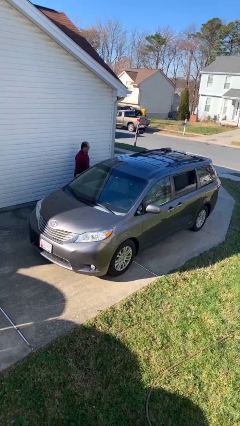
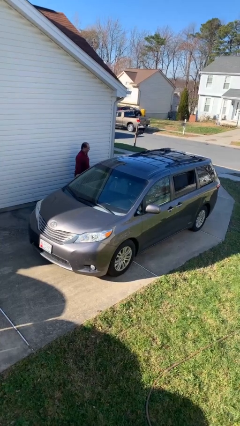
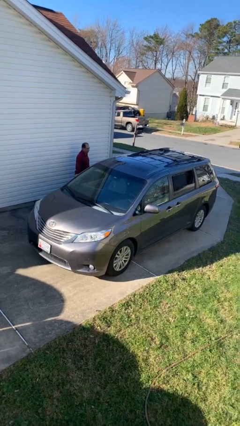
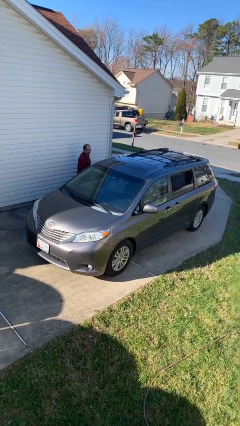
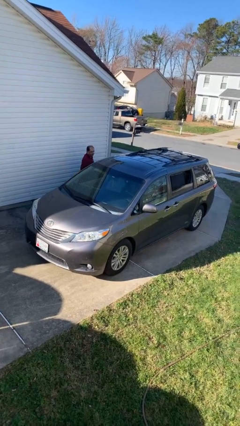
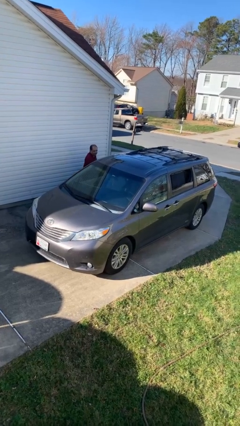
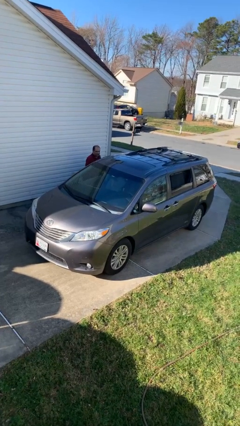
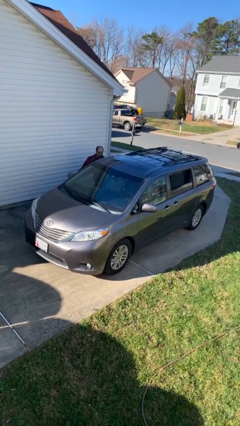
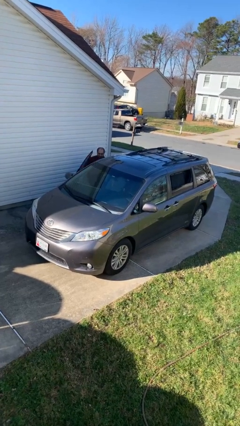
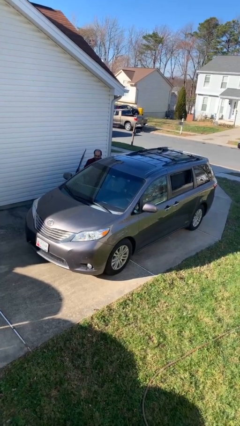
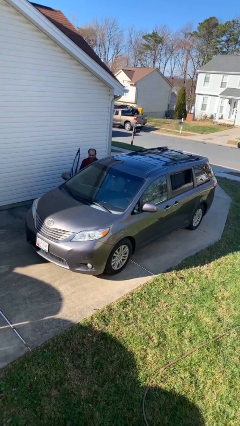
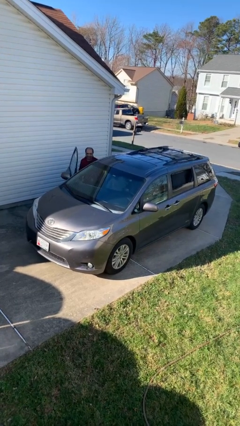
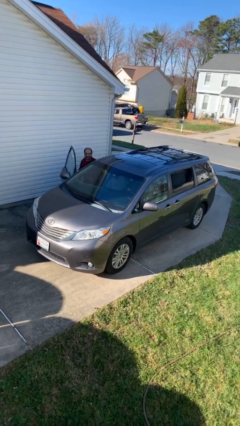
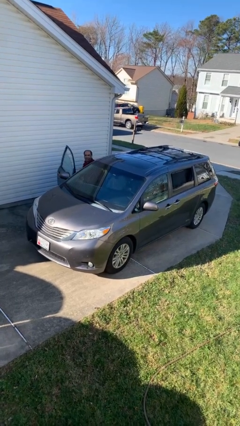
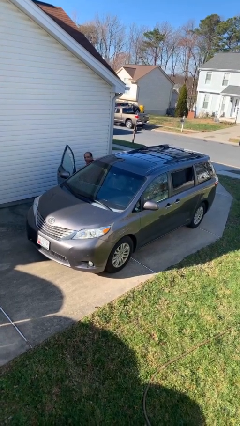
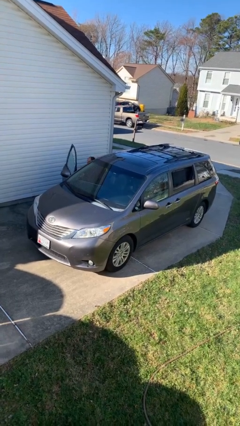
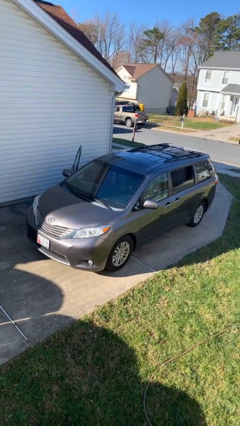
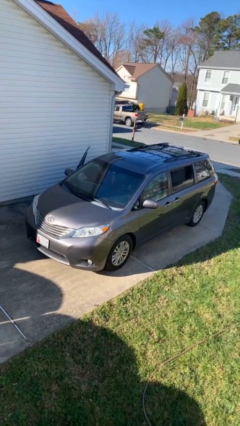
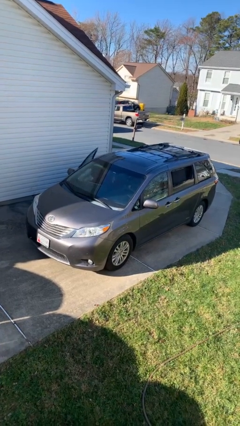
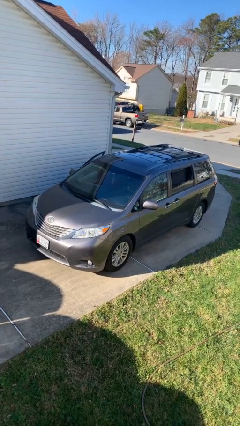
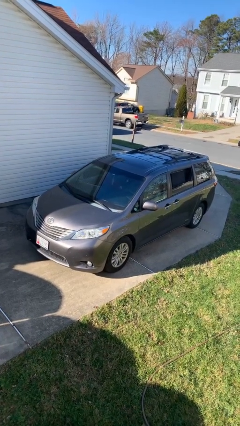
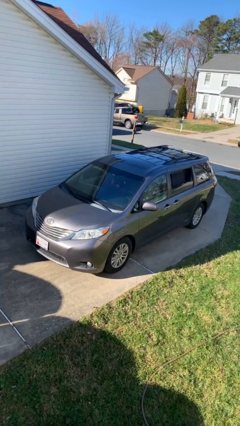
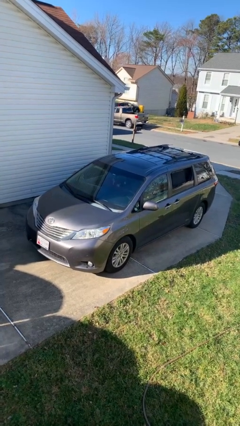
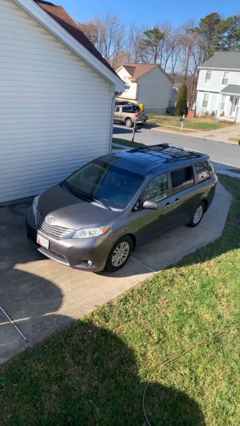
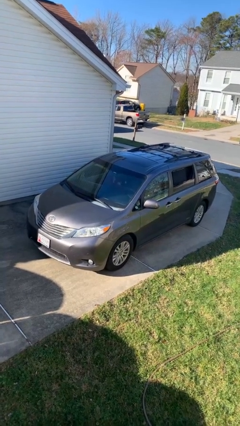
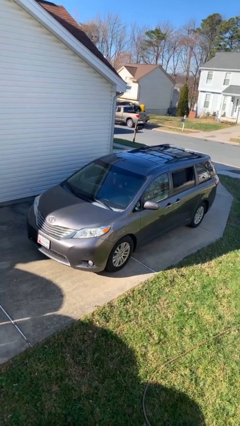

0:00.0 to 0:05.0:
car picks up person

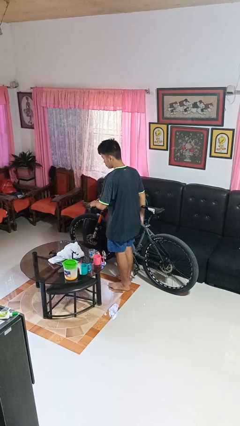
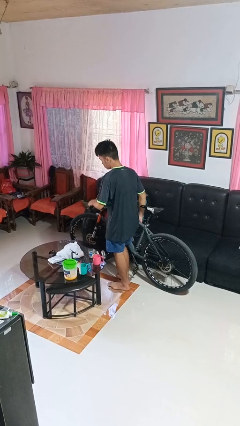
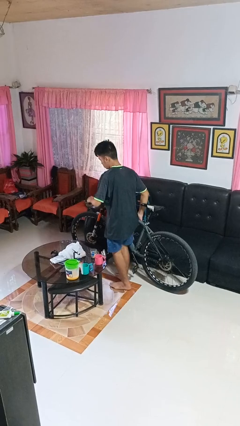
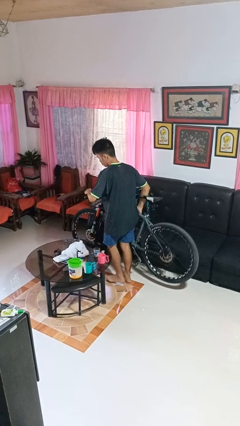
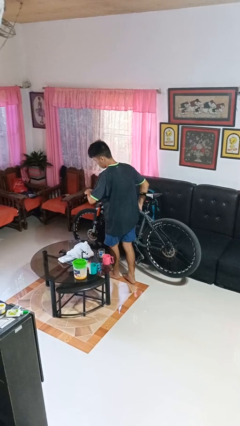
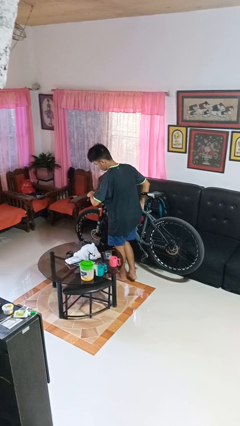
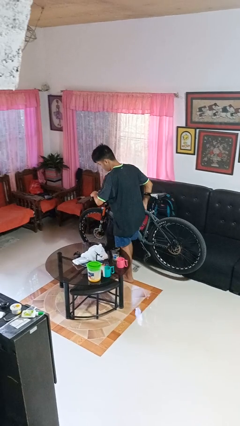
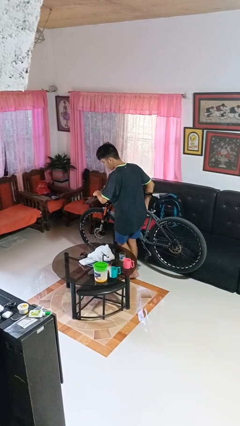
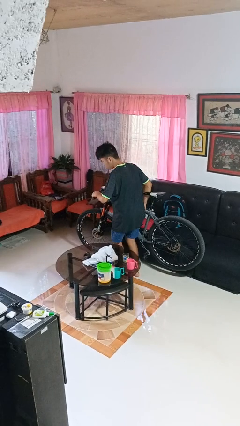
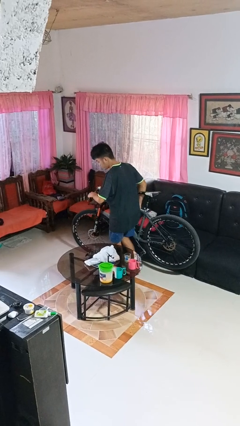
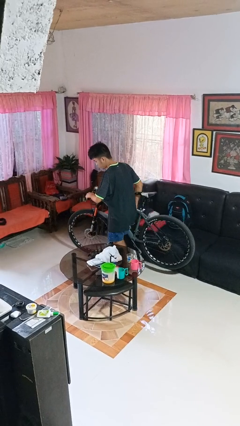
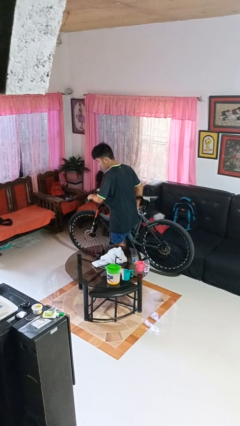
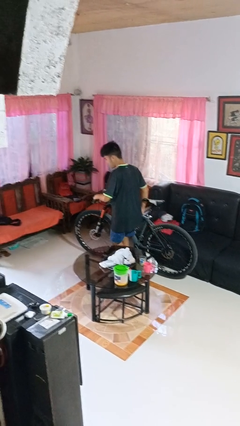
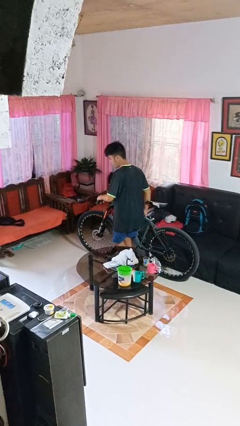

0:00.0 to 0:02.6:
person carries bicycle

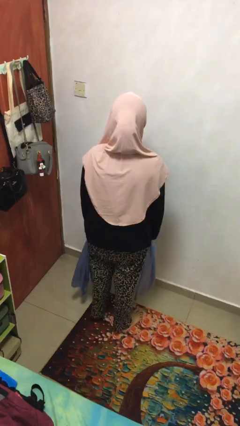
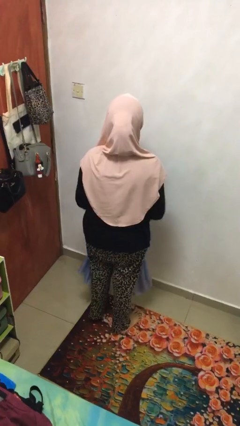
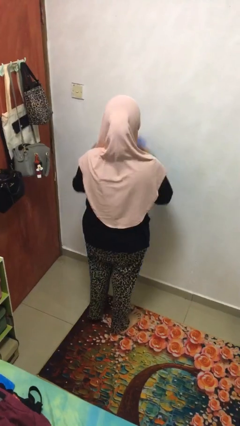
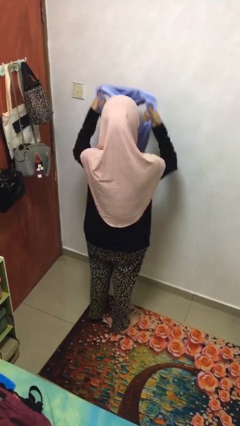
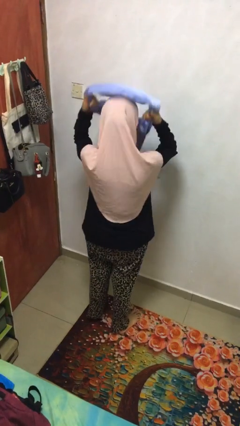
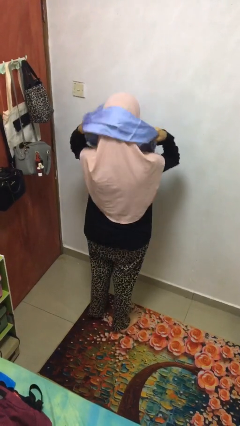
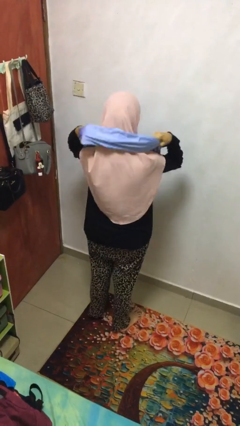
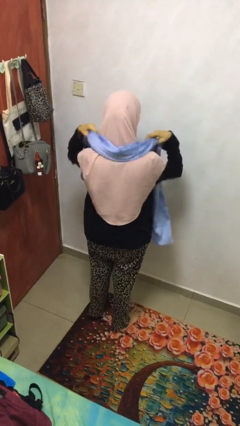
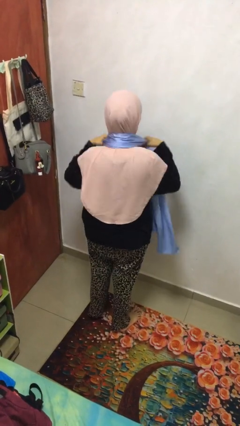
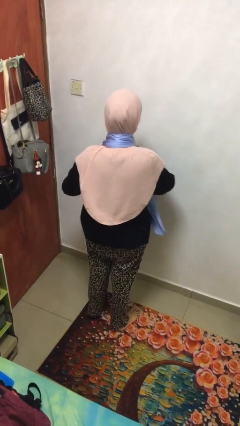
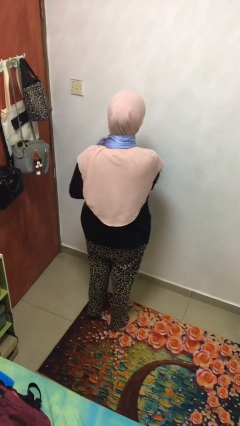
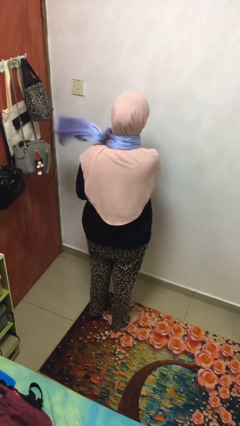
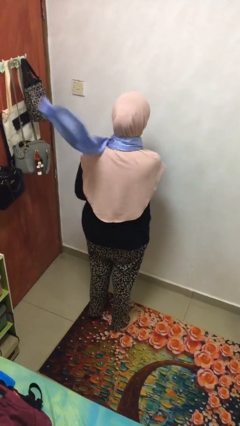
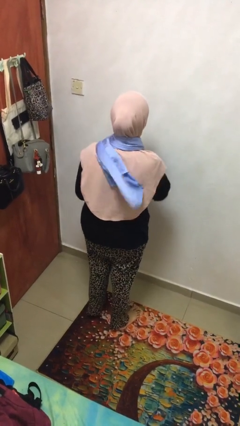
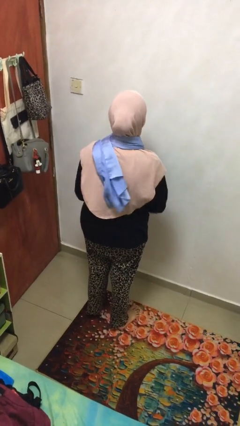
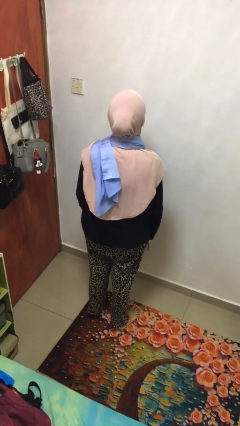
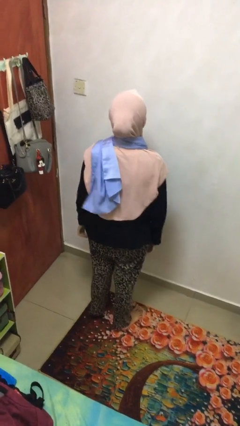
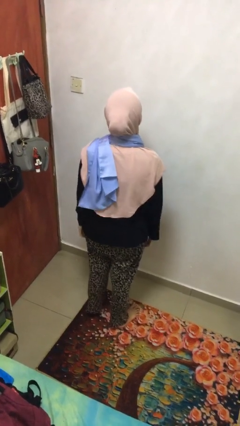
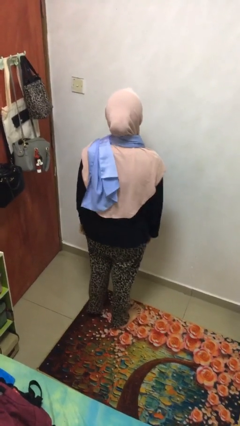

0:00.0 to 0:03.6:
person puts on scarf

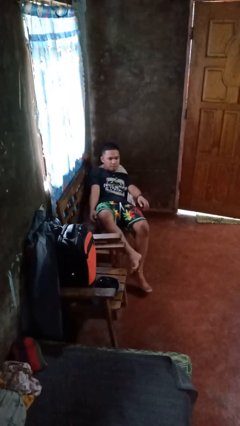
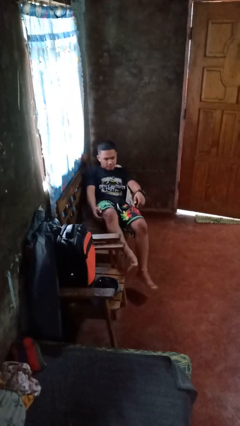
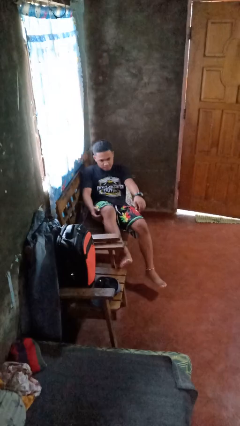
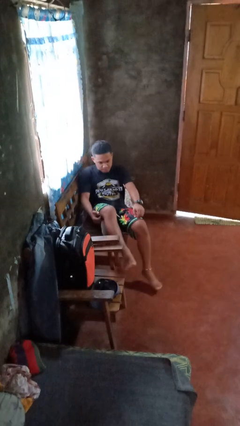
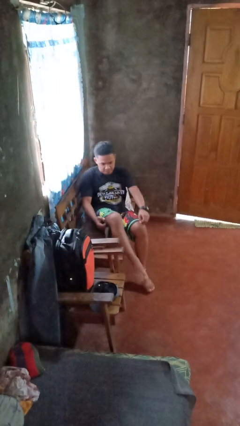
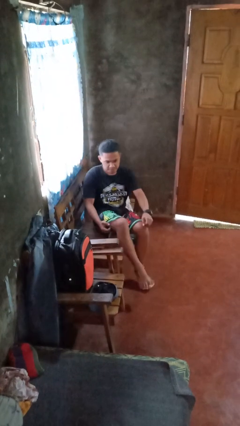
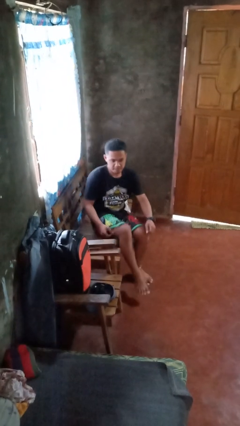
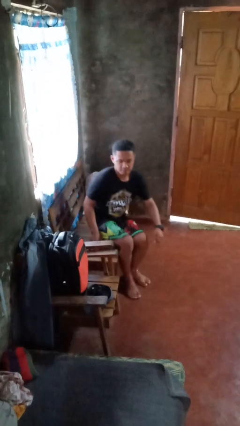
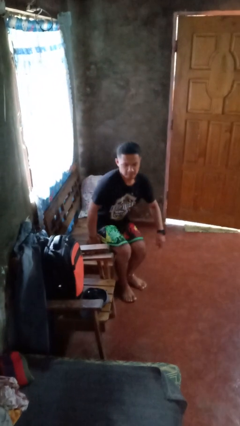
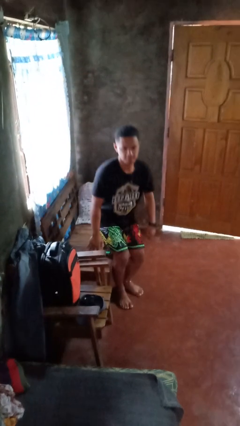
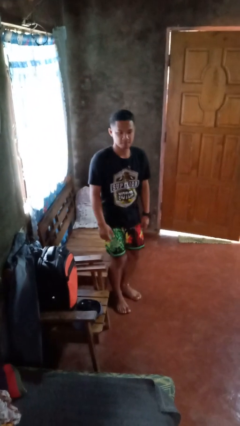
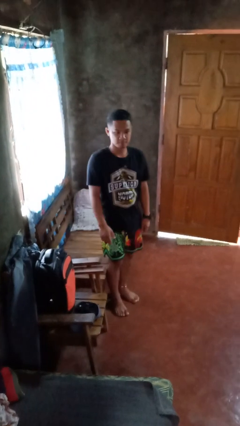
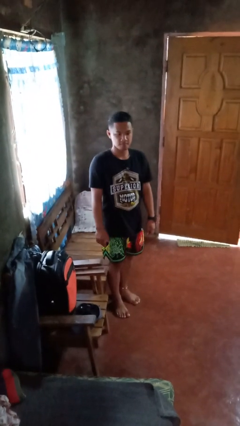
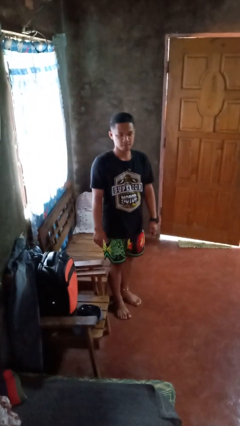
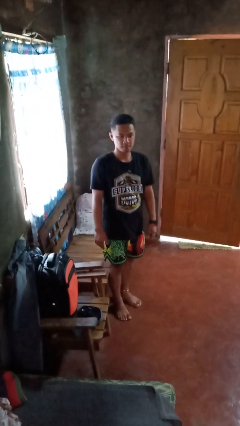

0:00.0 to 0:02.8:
person stands up

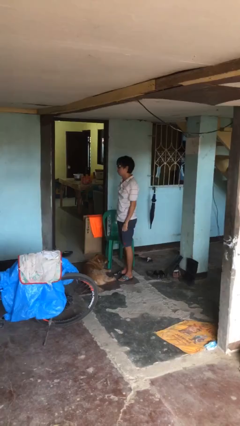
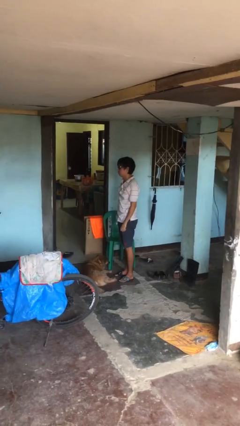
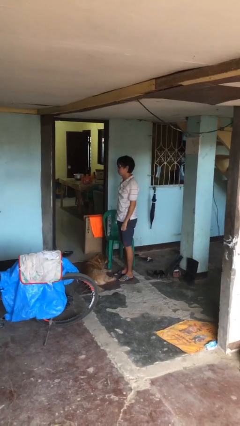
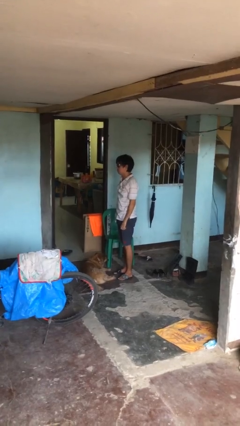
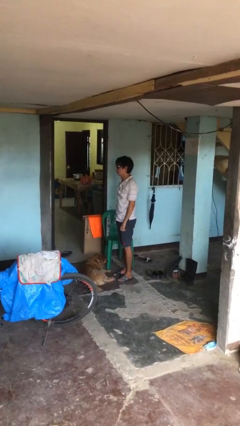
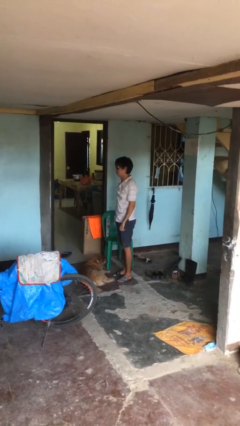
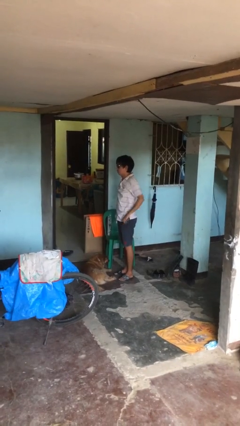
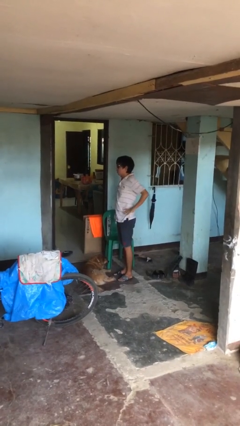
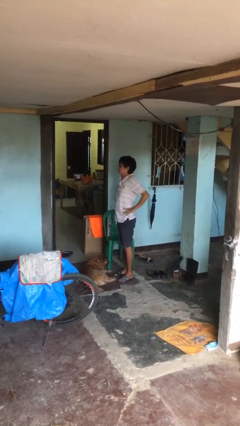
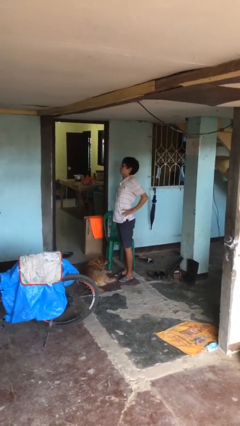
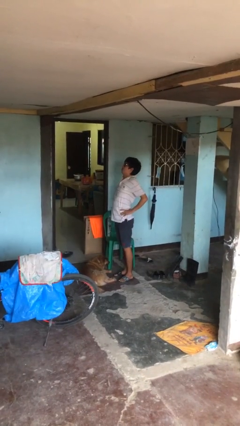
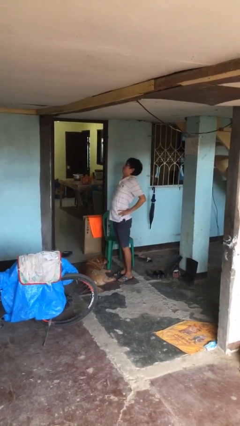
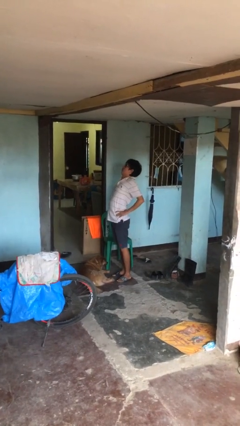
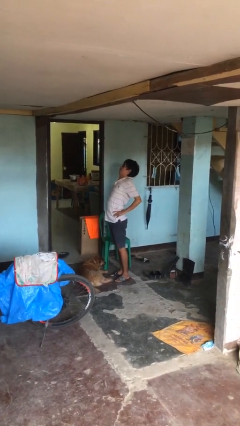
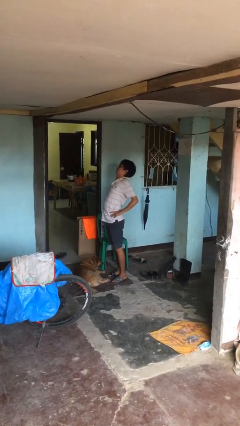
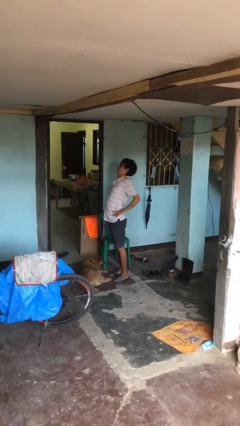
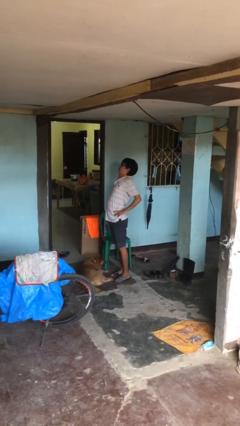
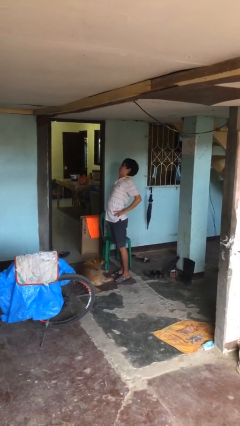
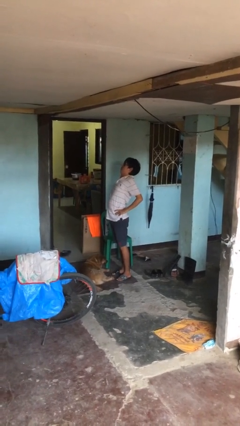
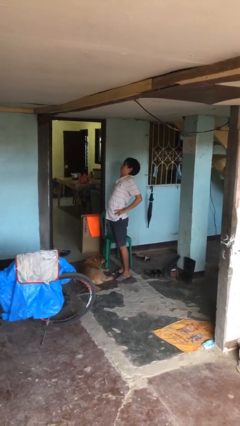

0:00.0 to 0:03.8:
person stretches back
